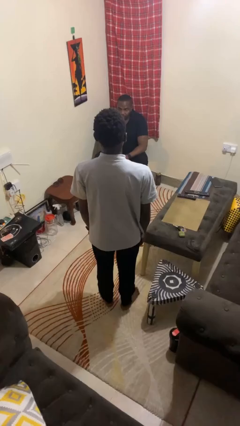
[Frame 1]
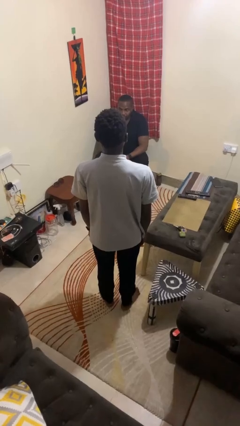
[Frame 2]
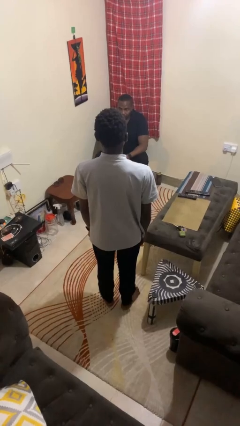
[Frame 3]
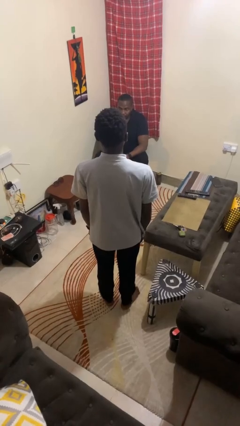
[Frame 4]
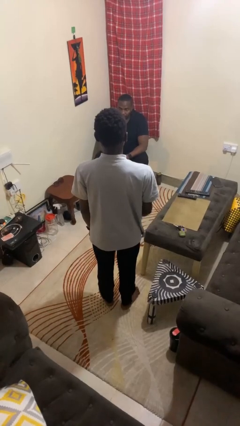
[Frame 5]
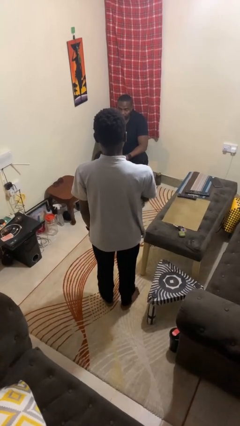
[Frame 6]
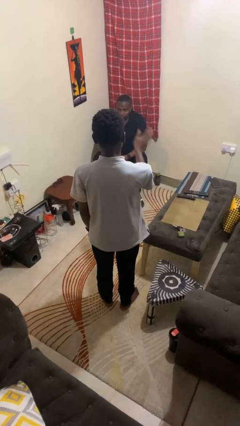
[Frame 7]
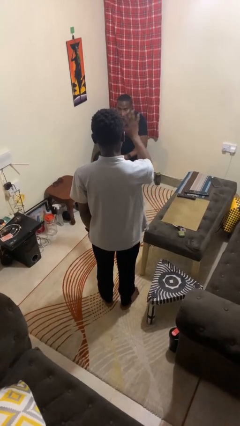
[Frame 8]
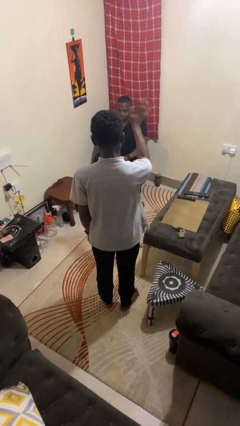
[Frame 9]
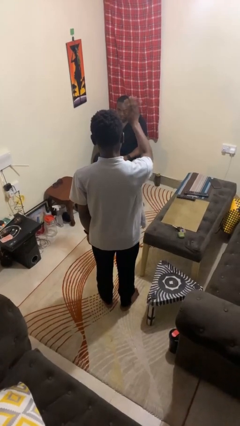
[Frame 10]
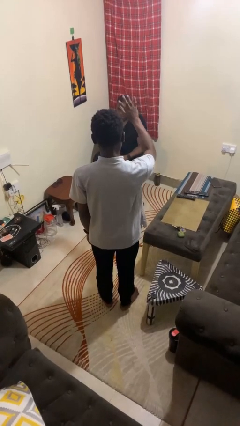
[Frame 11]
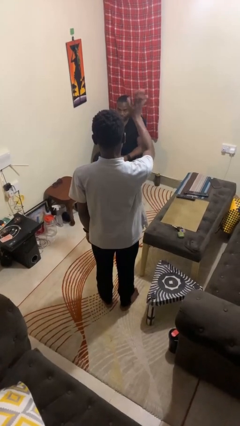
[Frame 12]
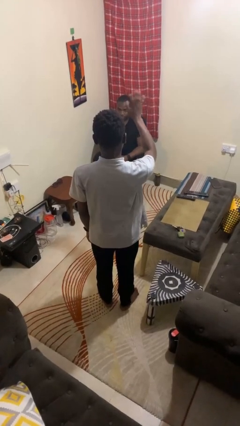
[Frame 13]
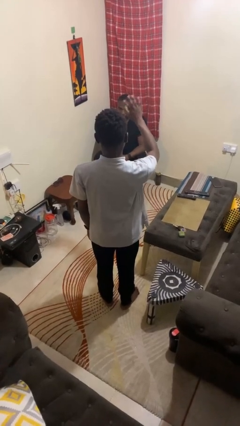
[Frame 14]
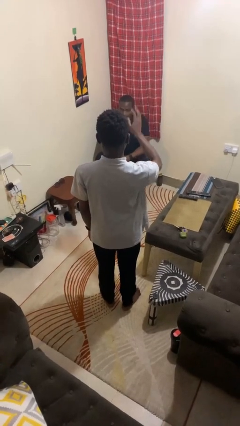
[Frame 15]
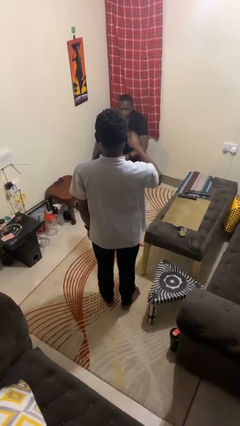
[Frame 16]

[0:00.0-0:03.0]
person waves at person

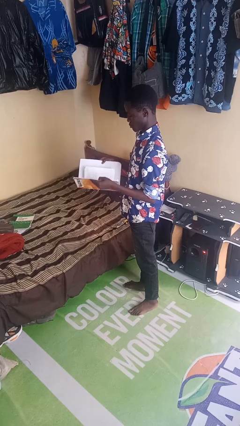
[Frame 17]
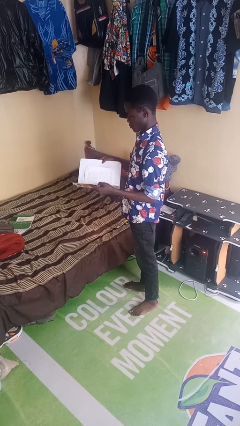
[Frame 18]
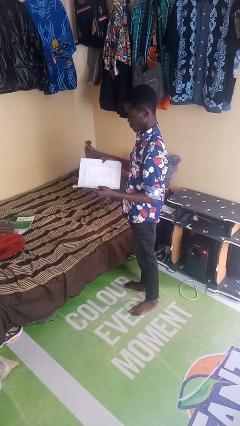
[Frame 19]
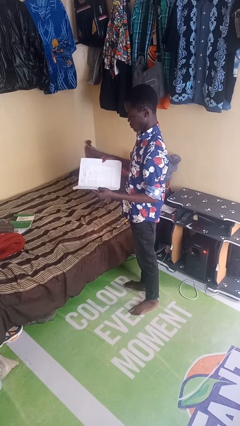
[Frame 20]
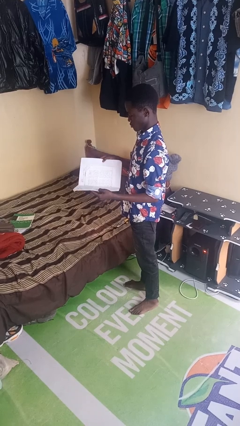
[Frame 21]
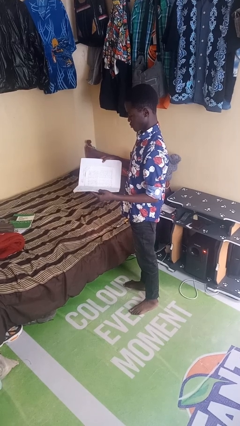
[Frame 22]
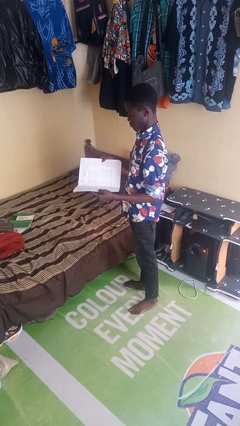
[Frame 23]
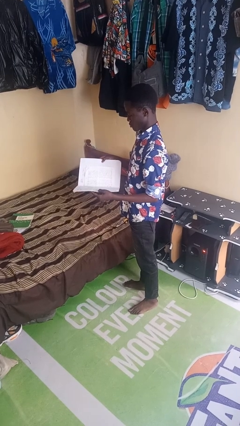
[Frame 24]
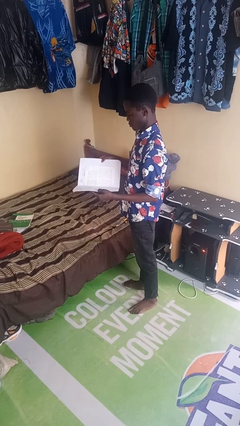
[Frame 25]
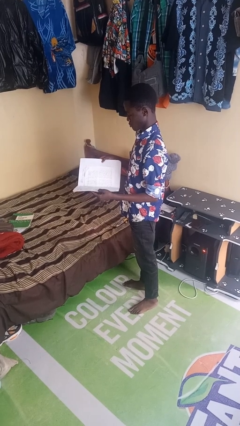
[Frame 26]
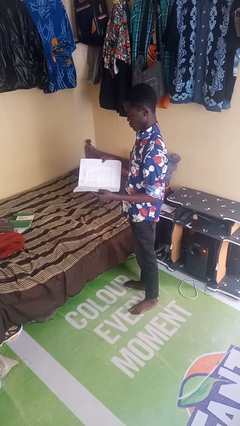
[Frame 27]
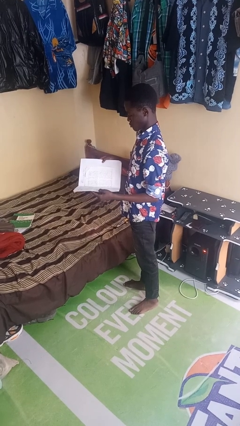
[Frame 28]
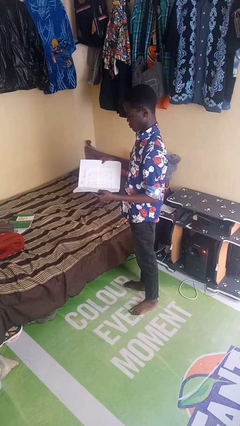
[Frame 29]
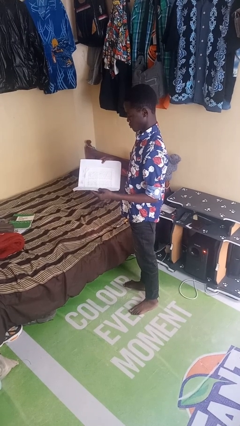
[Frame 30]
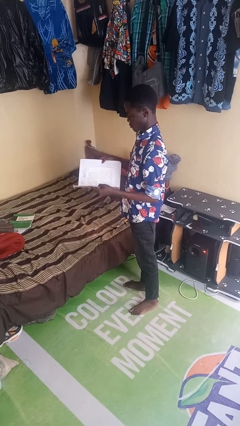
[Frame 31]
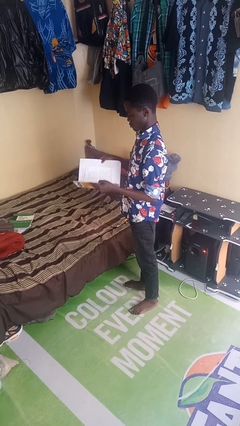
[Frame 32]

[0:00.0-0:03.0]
person reads book

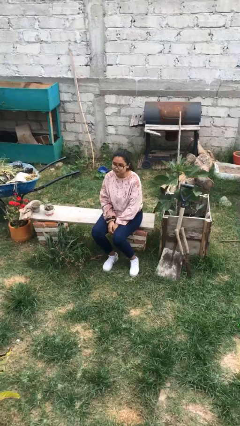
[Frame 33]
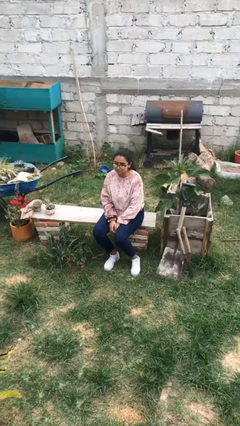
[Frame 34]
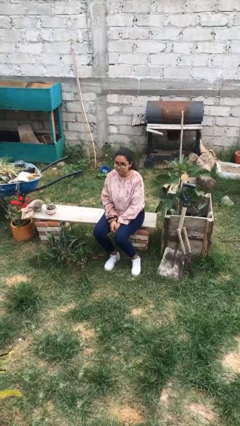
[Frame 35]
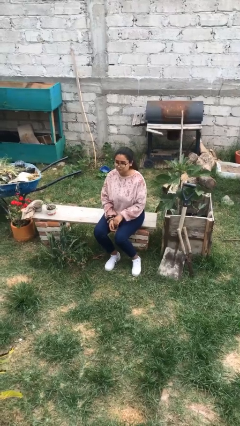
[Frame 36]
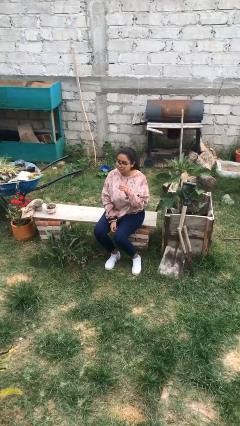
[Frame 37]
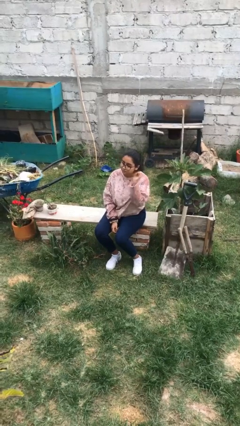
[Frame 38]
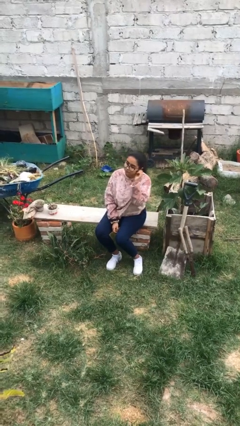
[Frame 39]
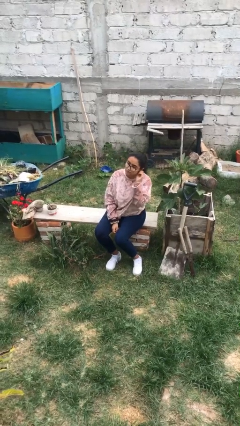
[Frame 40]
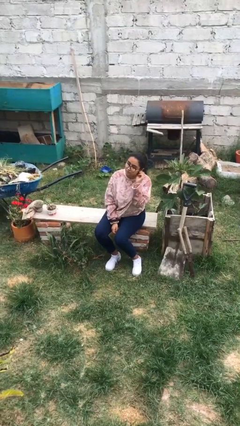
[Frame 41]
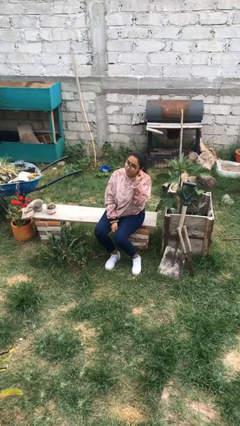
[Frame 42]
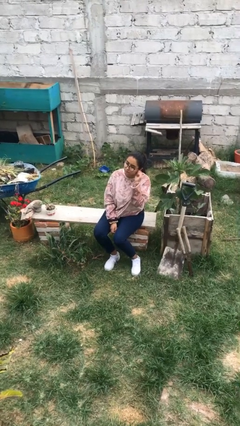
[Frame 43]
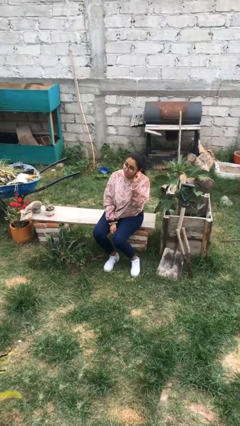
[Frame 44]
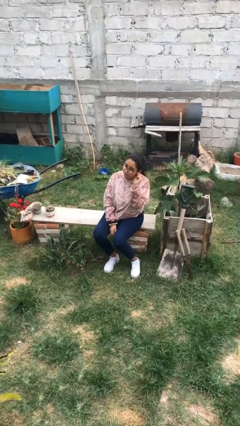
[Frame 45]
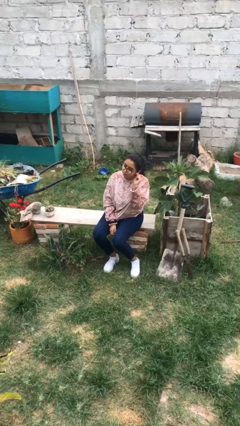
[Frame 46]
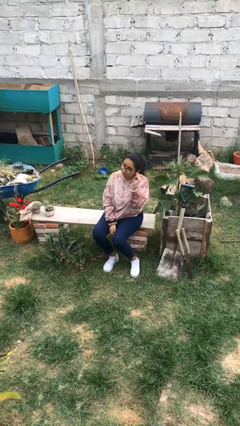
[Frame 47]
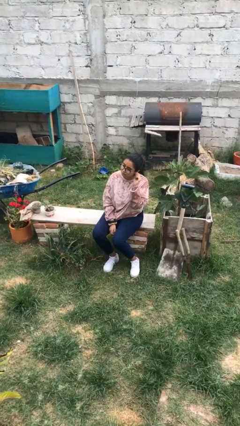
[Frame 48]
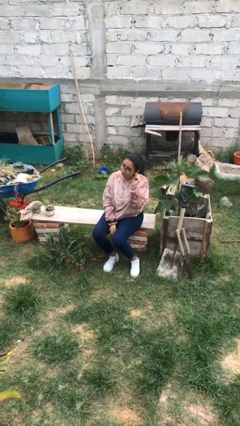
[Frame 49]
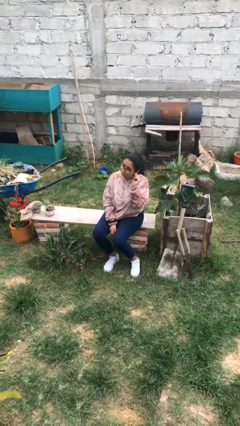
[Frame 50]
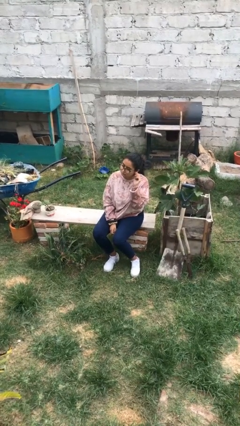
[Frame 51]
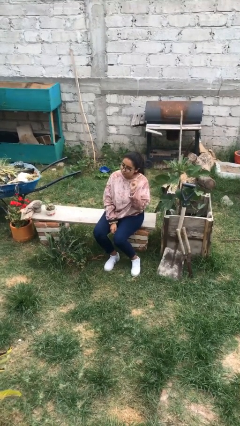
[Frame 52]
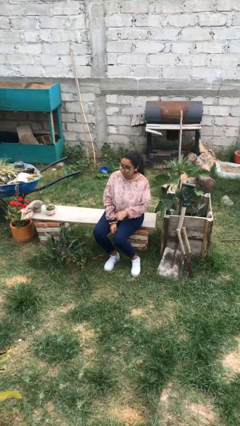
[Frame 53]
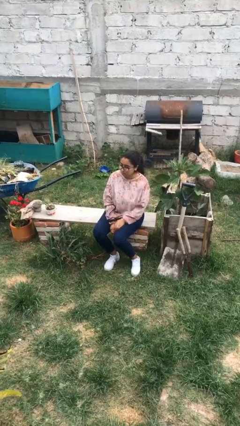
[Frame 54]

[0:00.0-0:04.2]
person touches earlobe

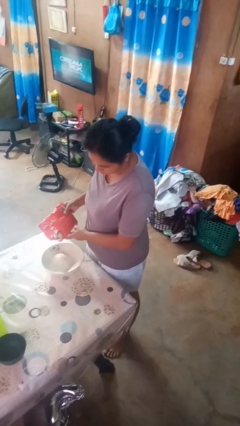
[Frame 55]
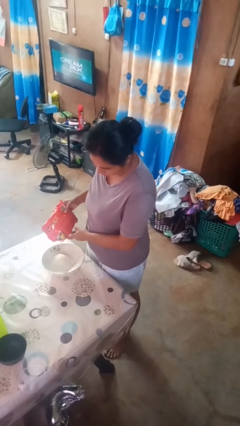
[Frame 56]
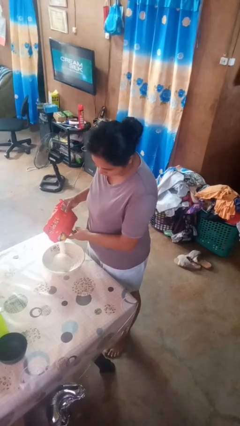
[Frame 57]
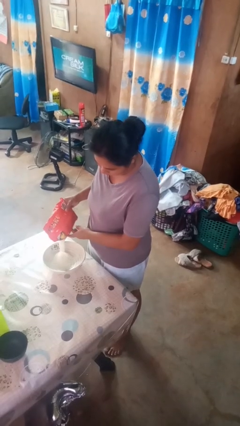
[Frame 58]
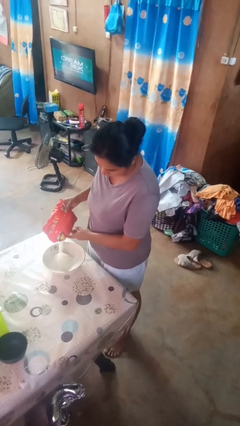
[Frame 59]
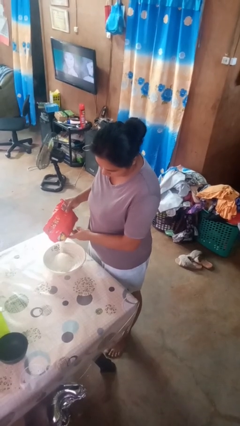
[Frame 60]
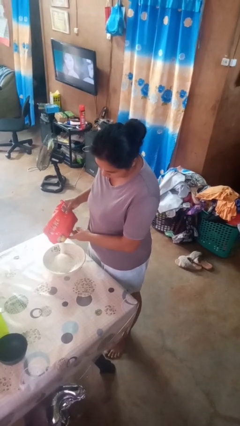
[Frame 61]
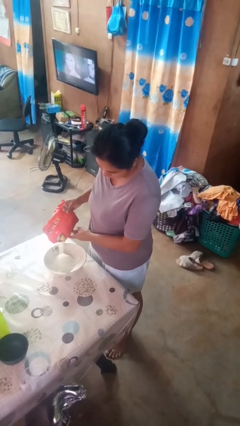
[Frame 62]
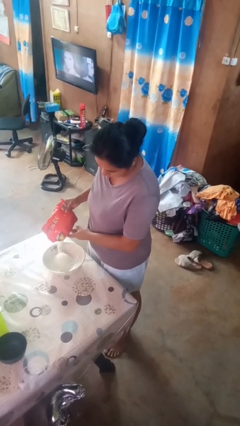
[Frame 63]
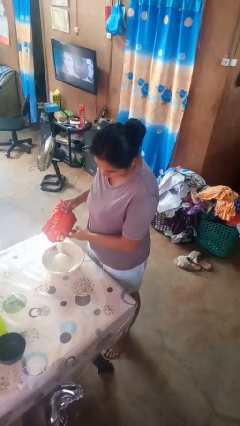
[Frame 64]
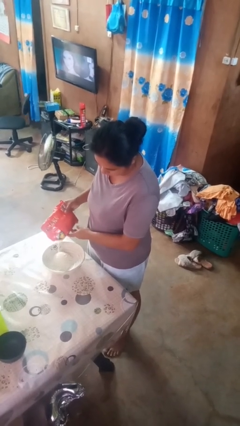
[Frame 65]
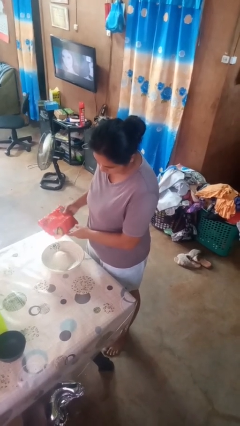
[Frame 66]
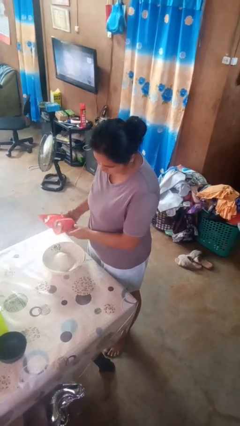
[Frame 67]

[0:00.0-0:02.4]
person pours into bowl

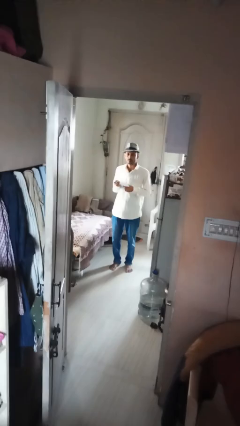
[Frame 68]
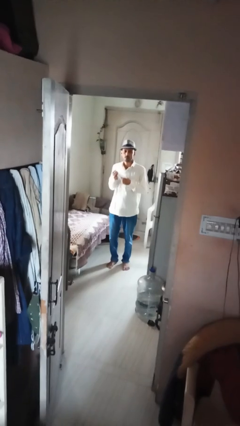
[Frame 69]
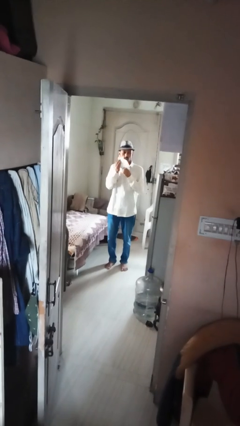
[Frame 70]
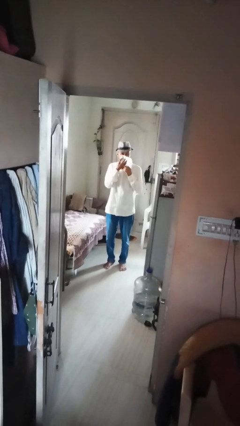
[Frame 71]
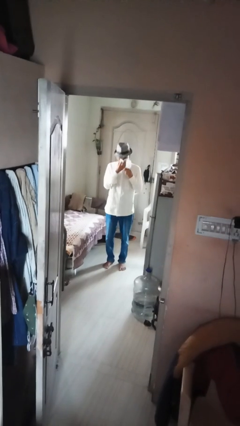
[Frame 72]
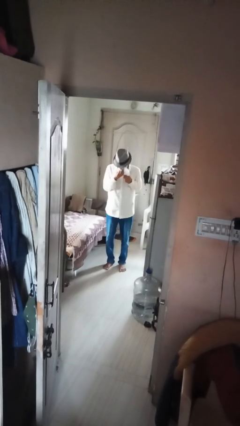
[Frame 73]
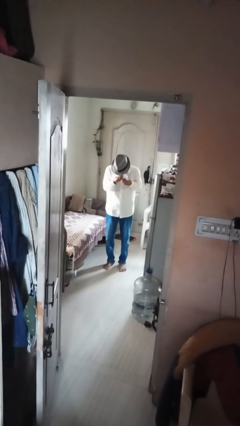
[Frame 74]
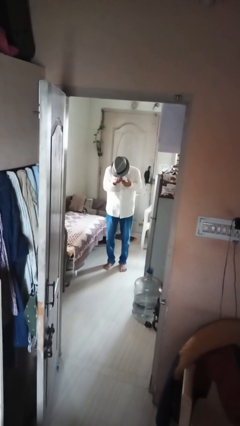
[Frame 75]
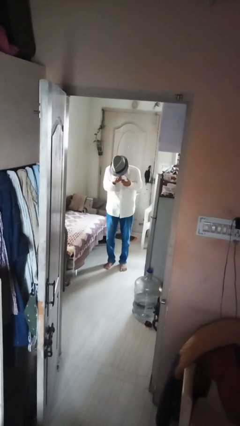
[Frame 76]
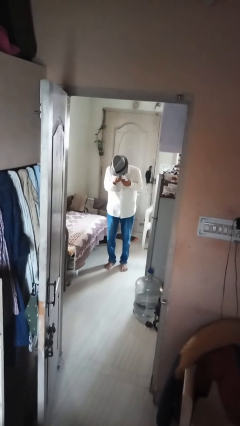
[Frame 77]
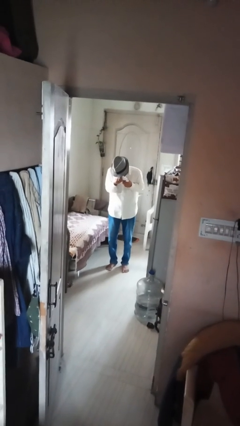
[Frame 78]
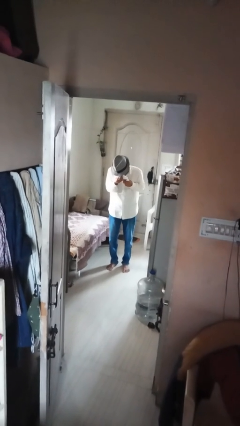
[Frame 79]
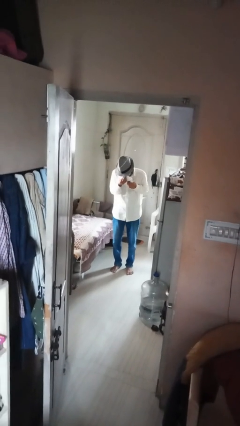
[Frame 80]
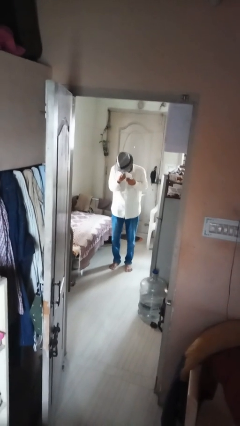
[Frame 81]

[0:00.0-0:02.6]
person blows nose

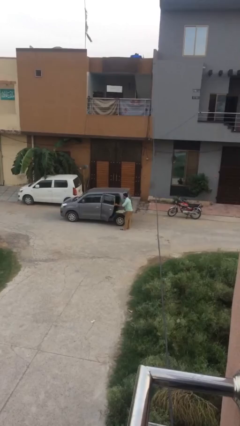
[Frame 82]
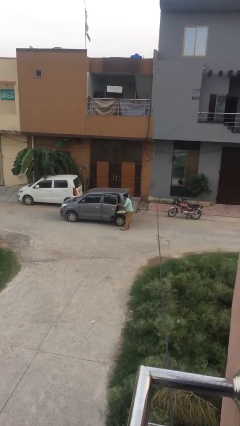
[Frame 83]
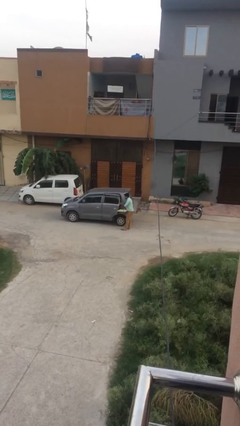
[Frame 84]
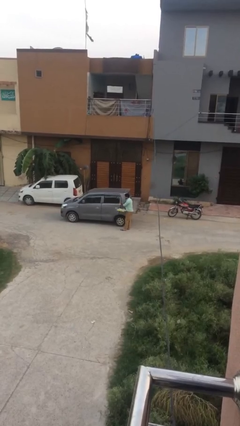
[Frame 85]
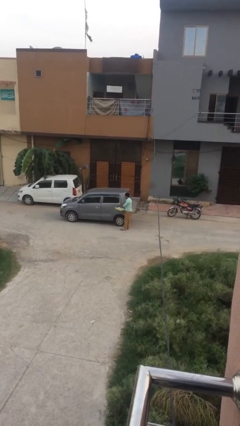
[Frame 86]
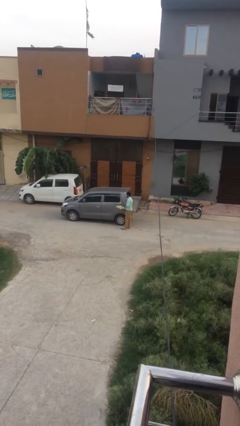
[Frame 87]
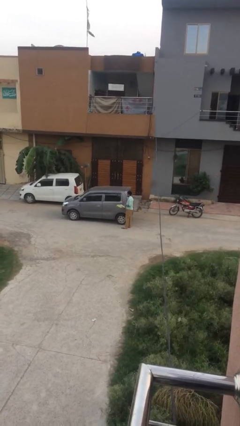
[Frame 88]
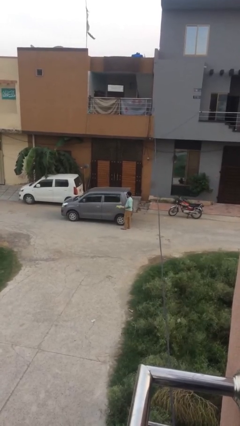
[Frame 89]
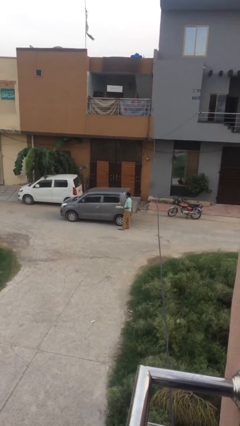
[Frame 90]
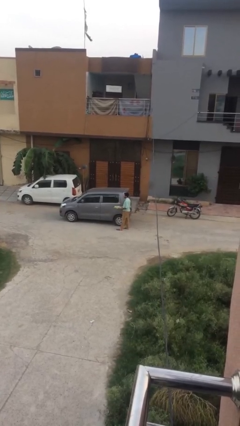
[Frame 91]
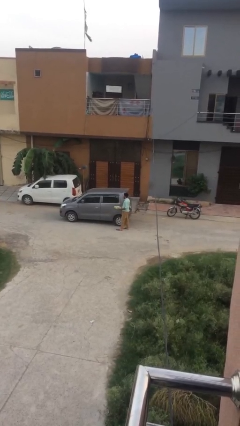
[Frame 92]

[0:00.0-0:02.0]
person closes car door

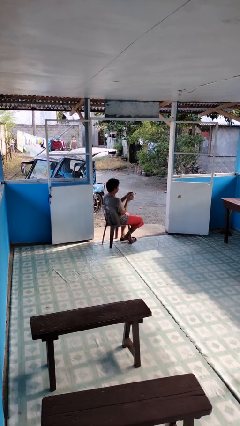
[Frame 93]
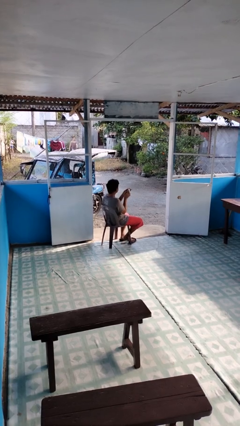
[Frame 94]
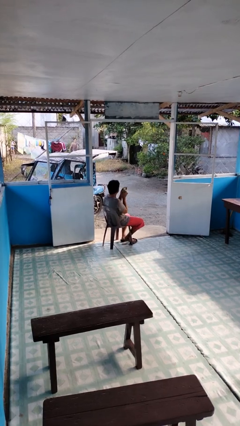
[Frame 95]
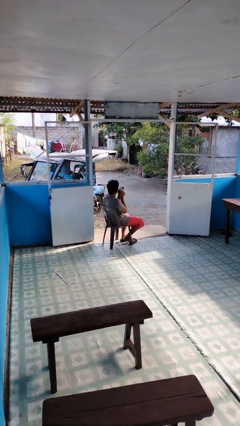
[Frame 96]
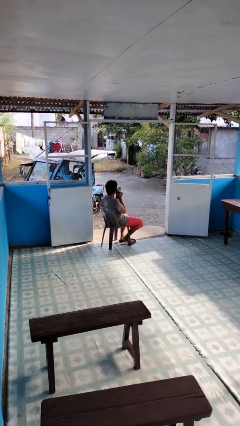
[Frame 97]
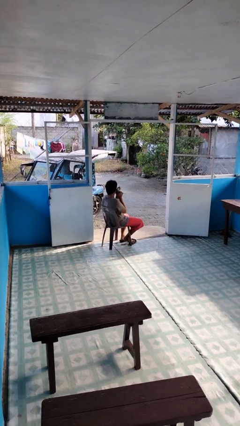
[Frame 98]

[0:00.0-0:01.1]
person hugs cat
